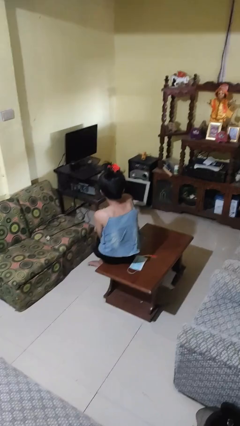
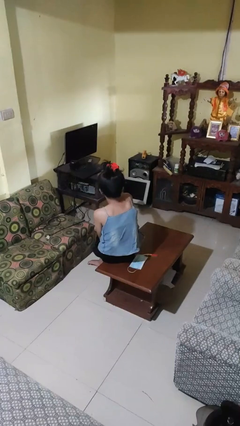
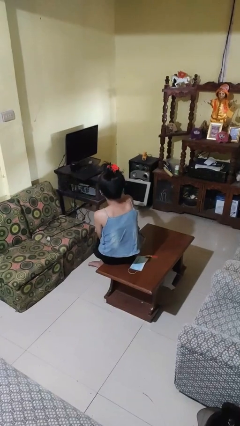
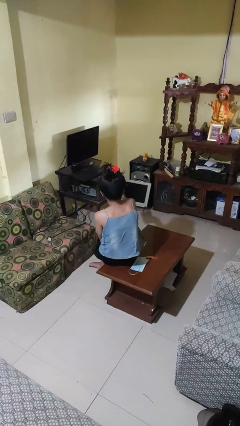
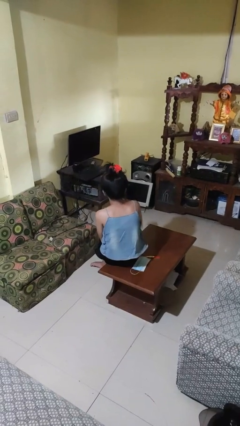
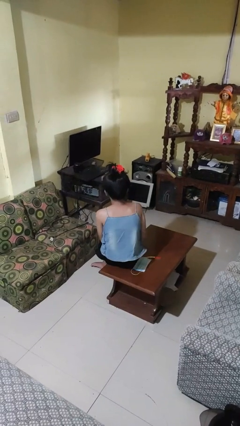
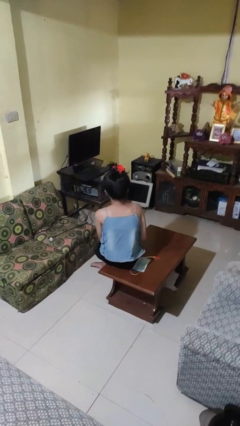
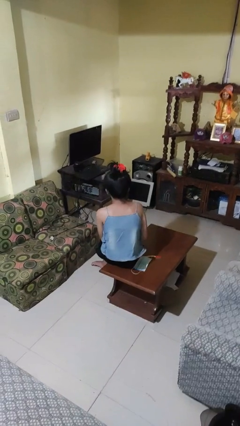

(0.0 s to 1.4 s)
person uses television remote

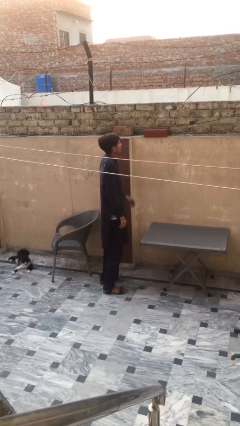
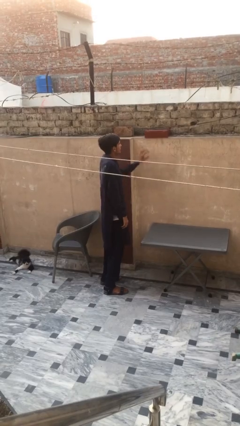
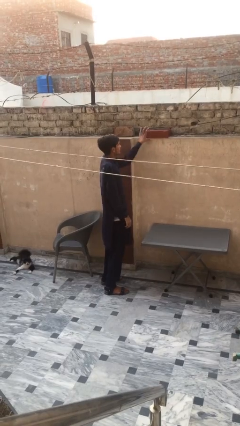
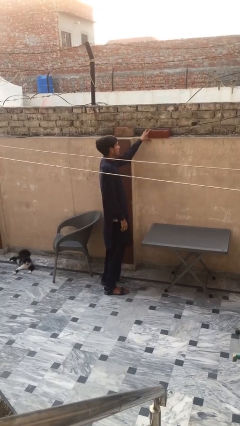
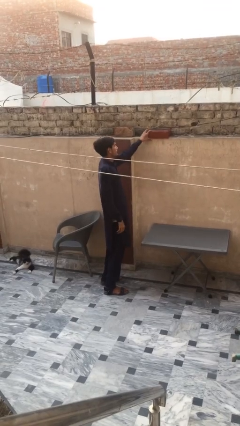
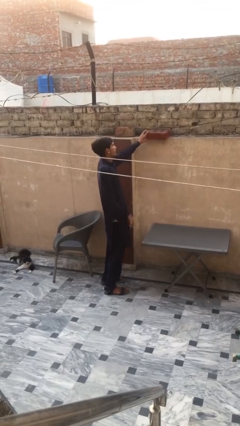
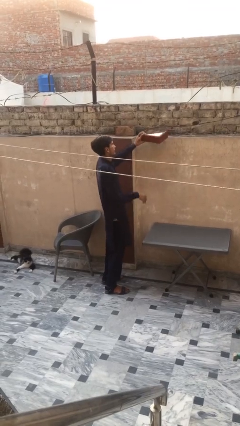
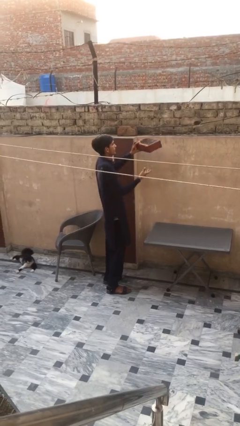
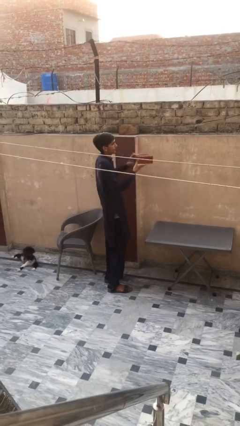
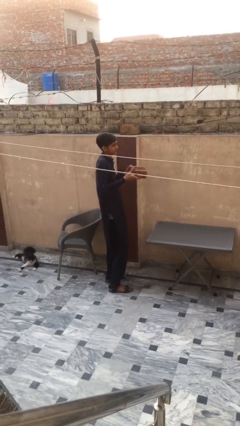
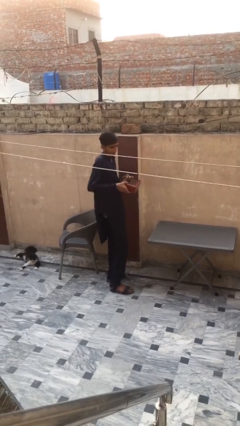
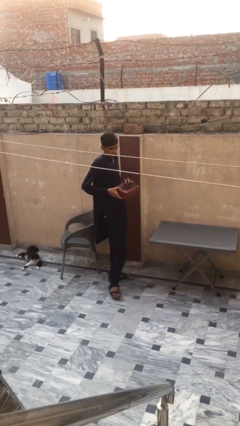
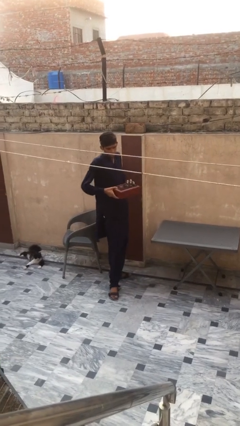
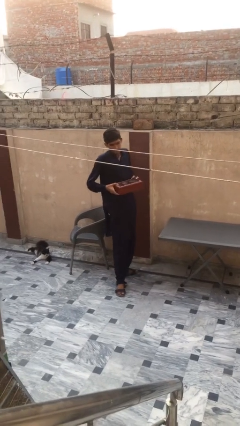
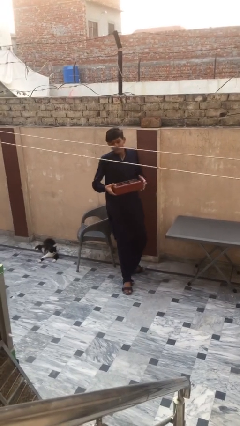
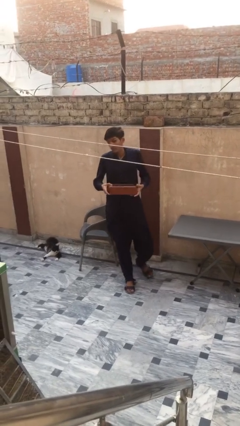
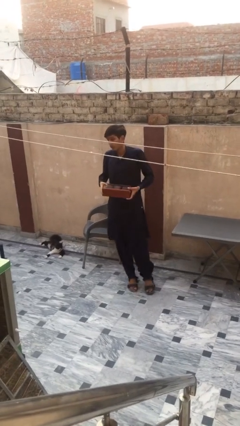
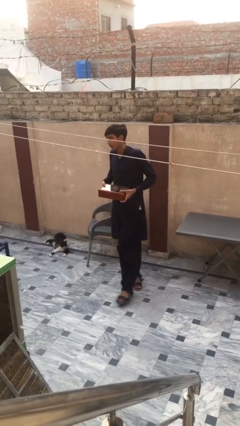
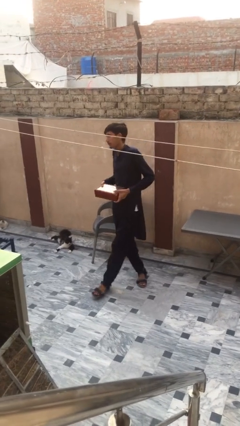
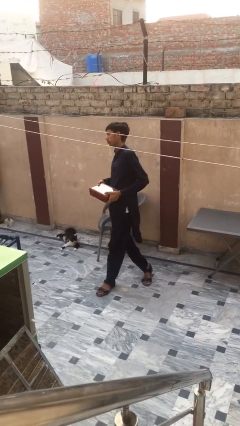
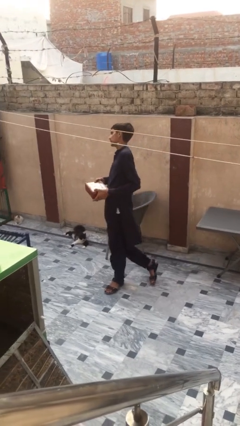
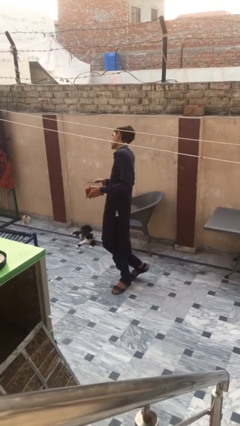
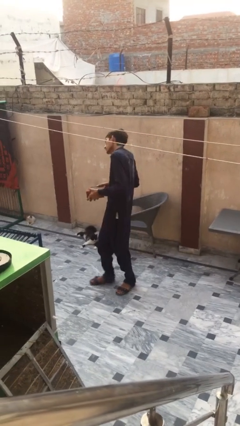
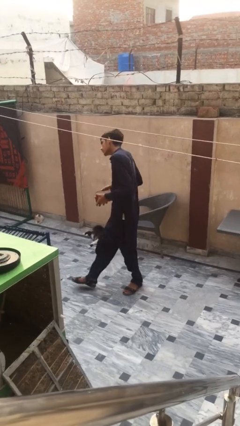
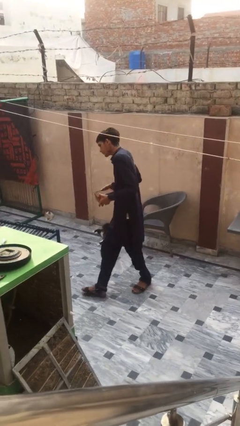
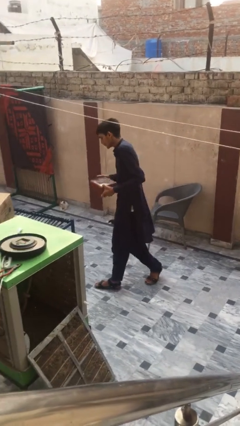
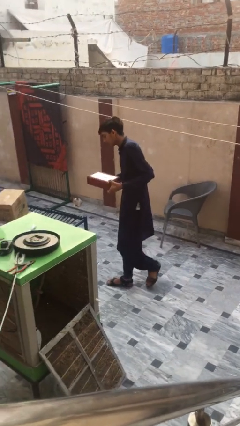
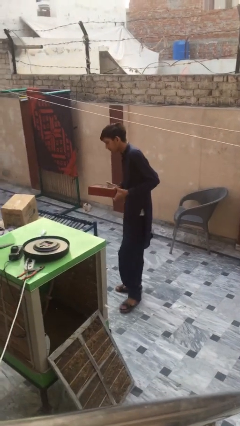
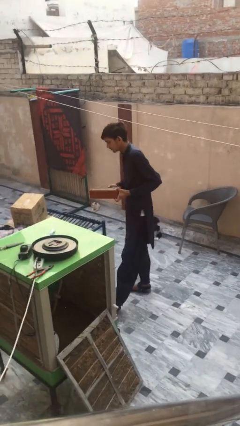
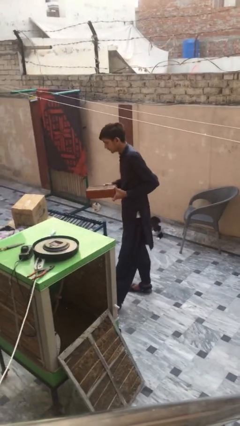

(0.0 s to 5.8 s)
person picks up object from shelf

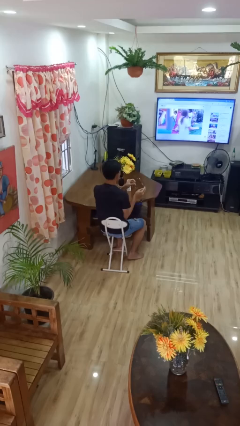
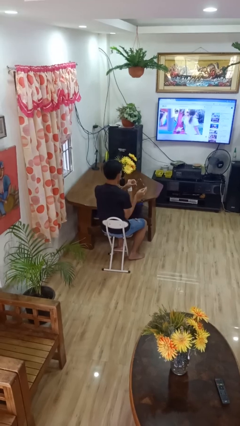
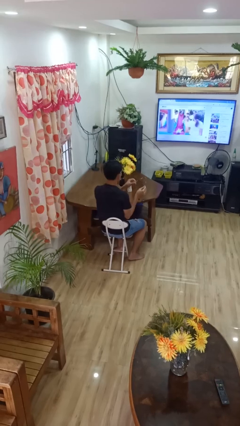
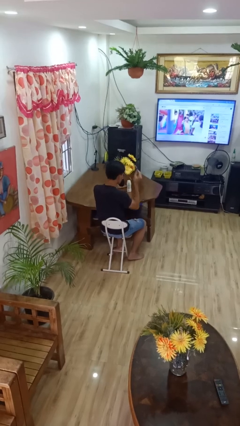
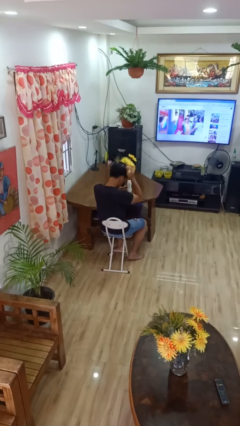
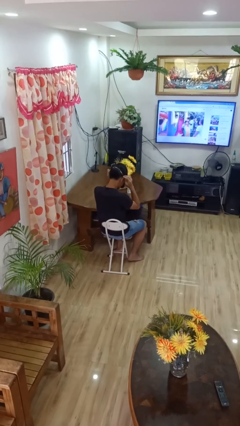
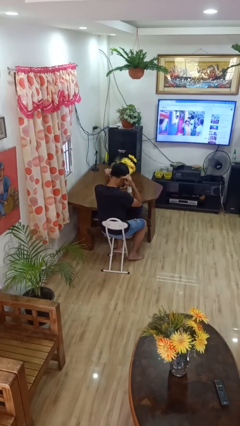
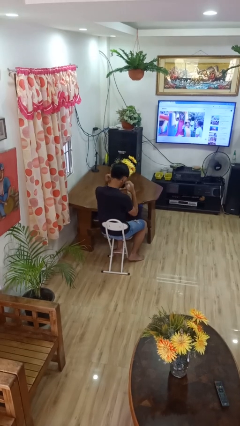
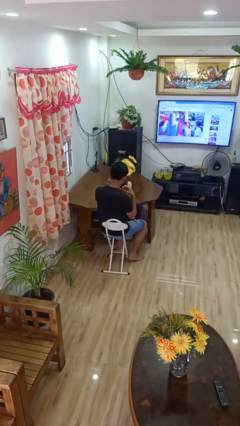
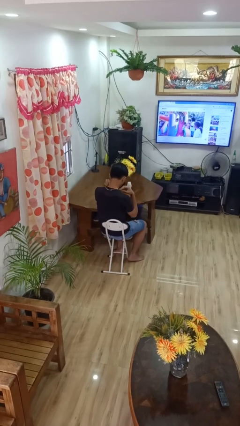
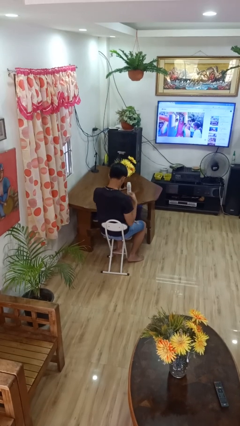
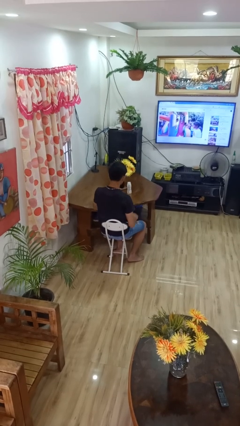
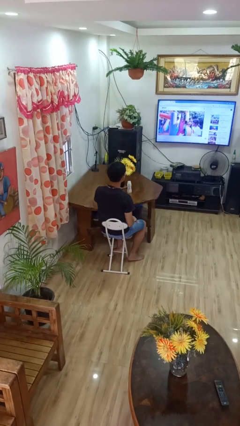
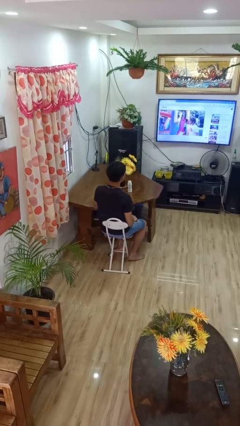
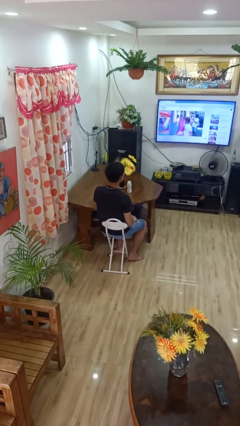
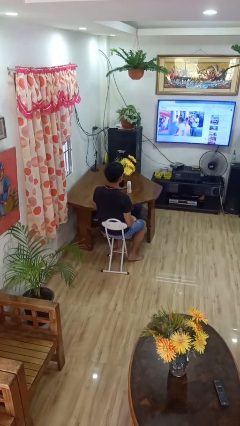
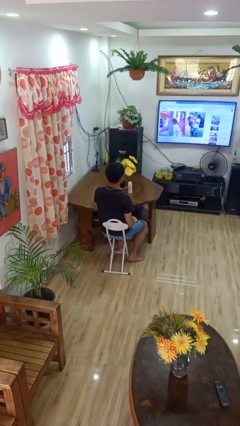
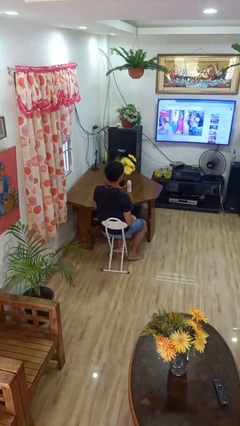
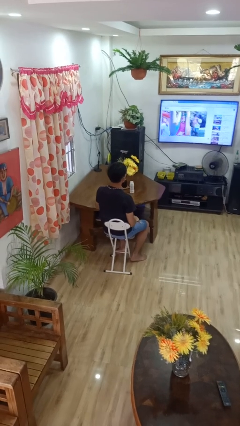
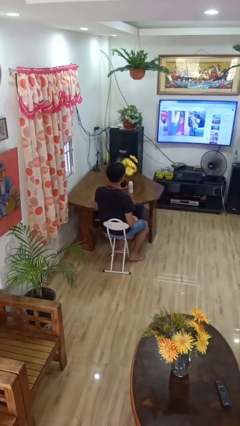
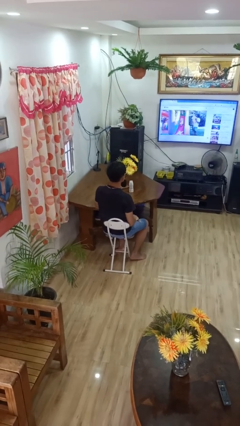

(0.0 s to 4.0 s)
person puts on necklace

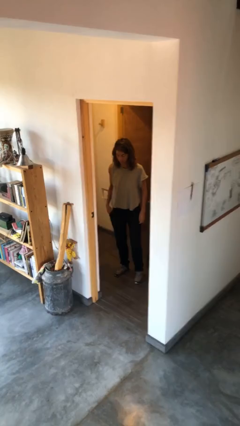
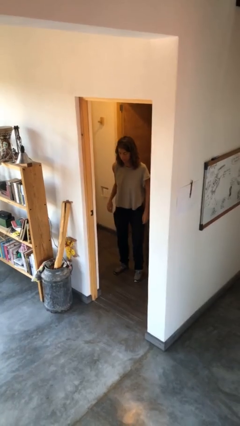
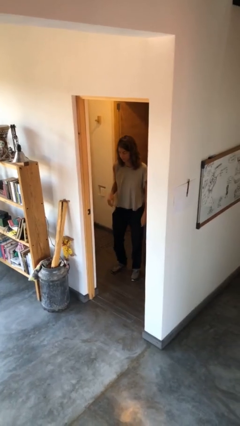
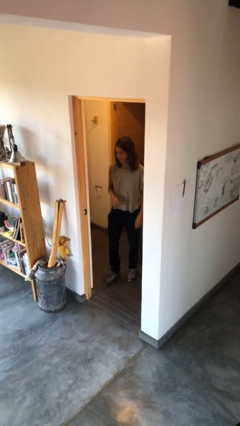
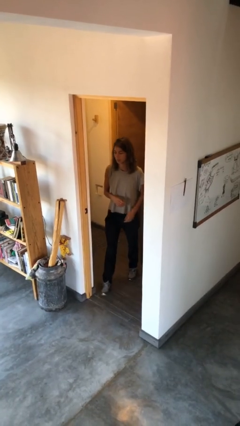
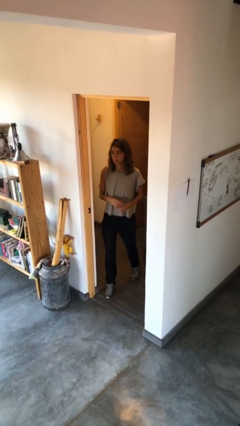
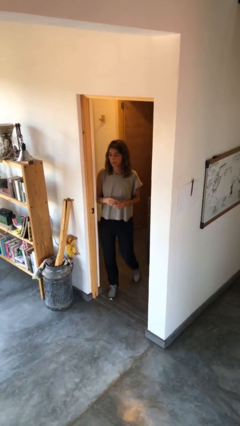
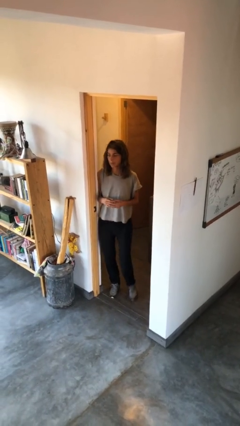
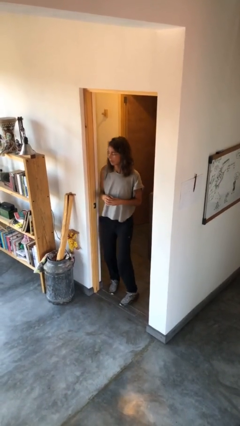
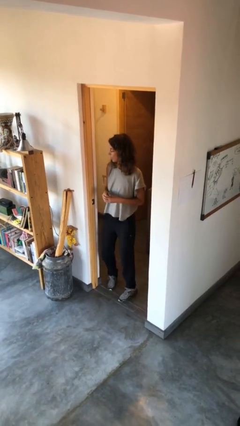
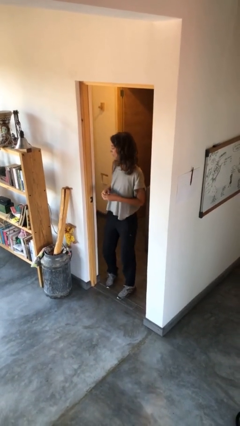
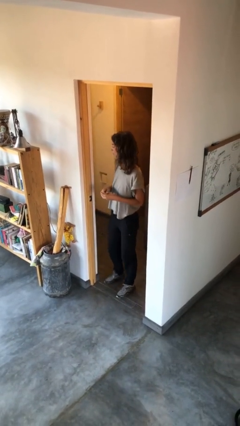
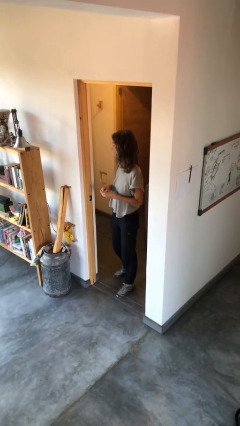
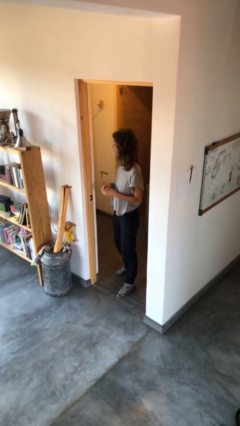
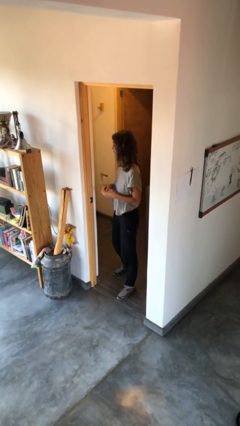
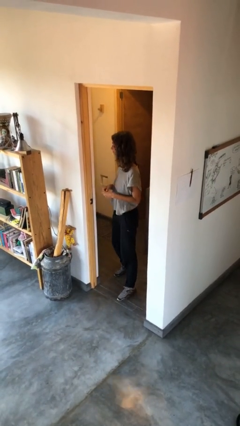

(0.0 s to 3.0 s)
person bumps into wall

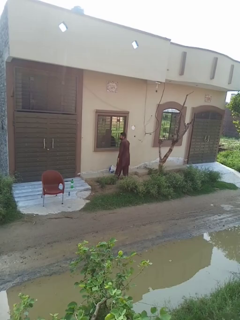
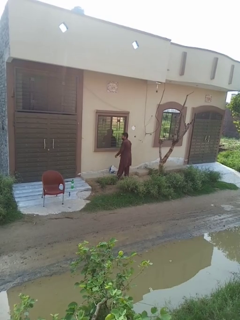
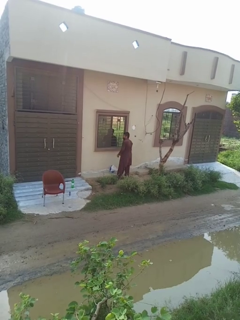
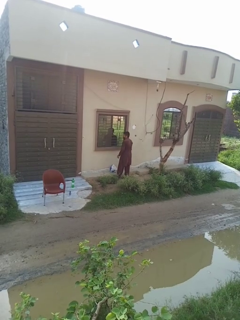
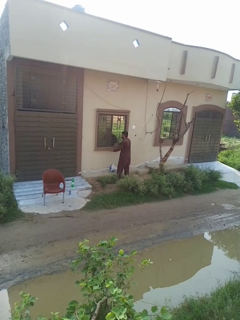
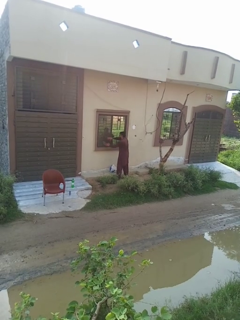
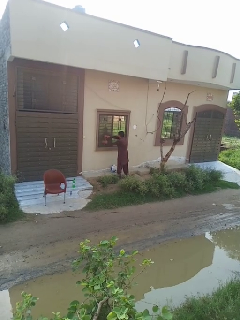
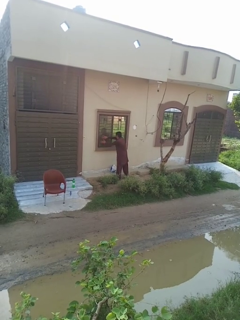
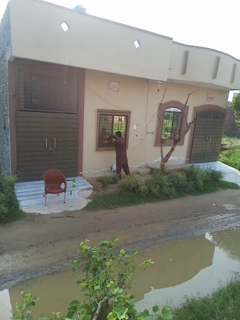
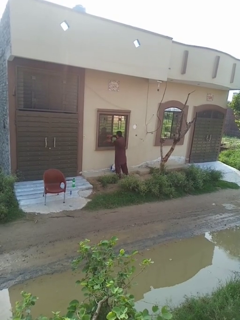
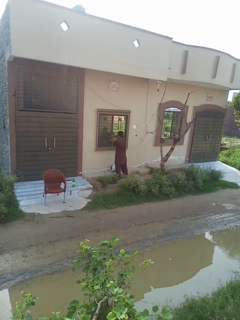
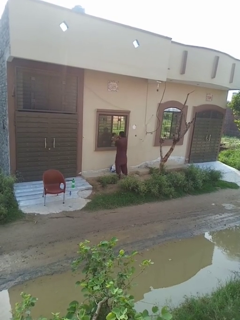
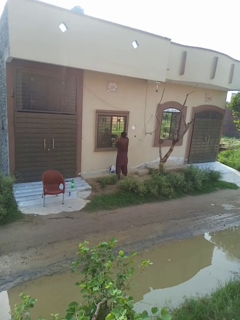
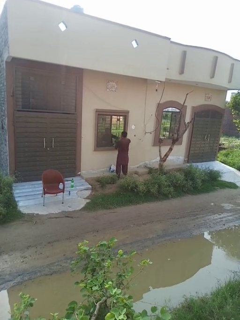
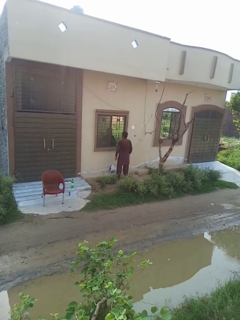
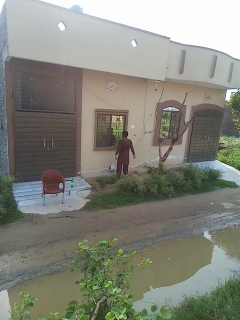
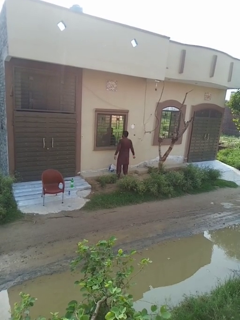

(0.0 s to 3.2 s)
person opens home window

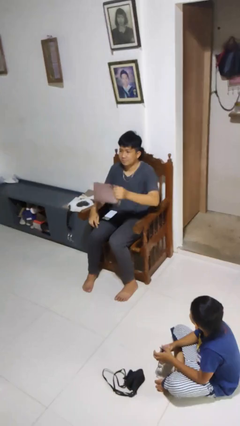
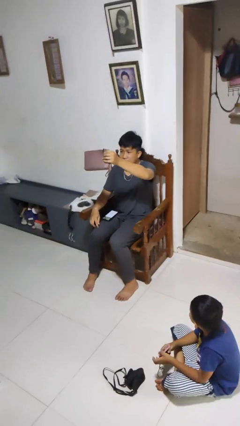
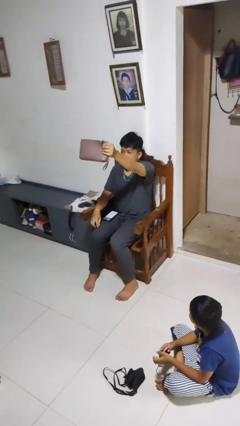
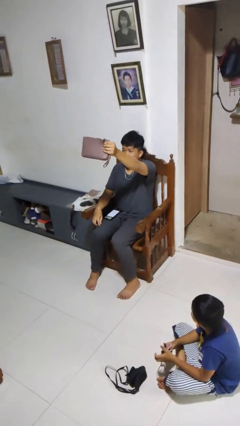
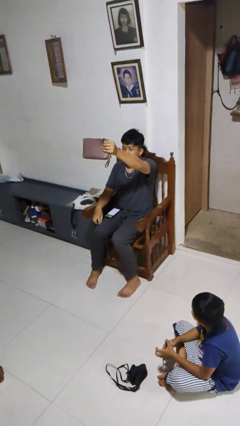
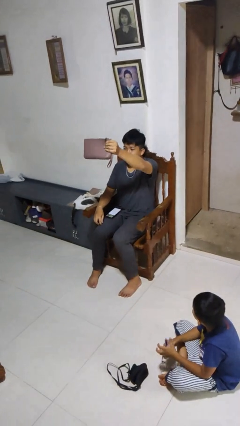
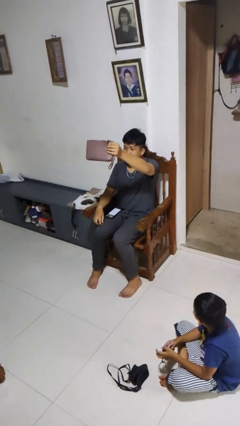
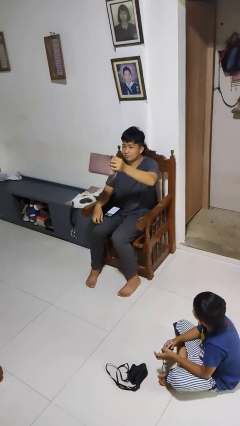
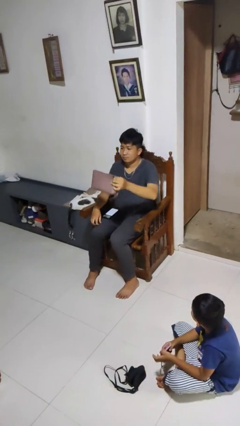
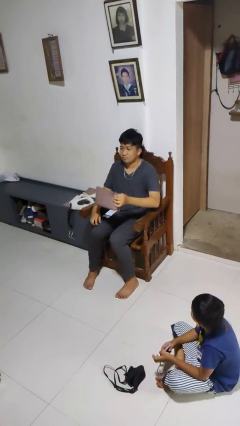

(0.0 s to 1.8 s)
person holds object above head
